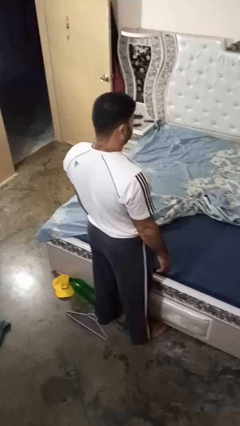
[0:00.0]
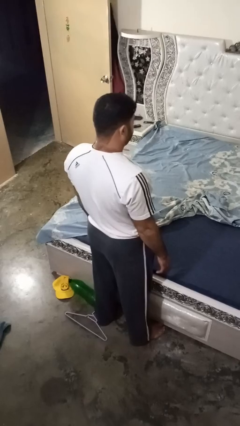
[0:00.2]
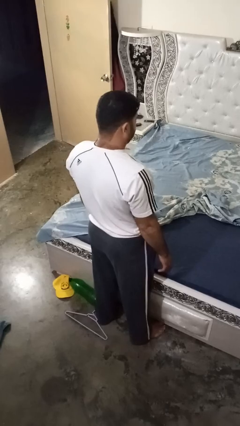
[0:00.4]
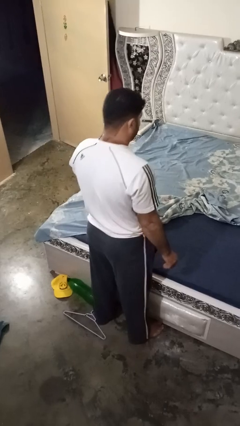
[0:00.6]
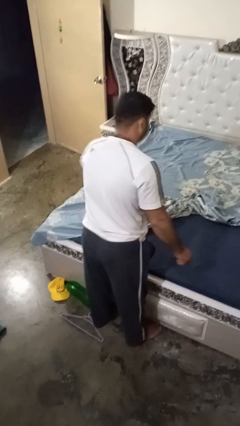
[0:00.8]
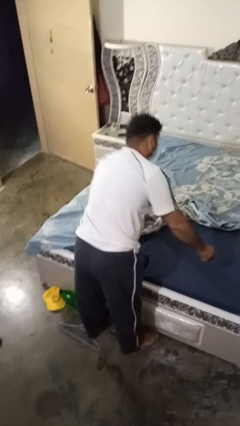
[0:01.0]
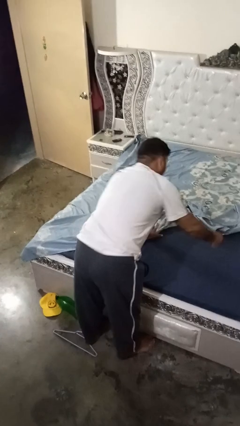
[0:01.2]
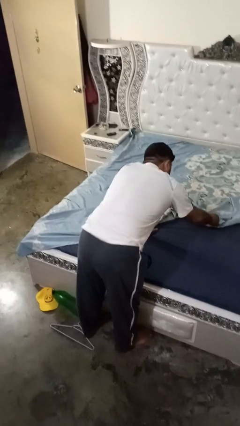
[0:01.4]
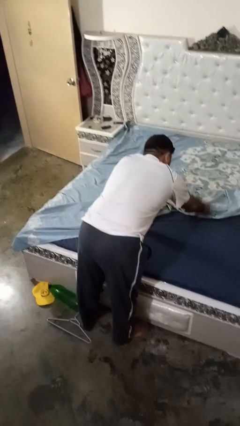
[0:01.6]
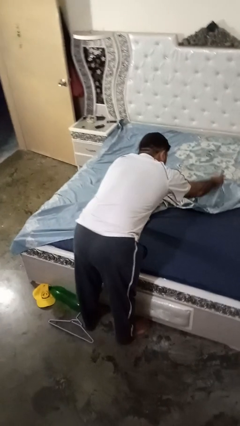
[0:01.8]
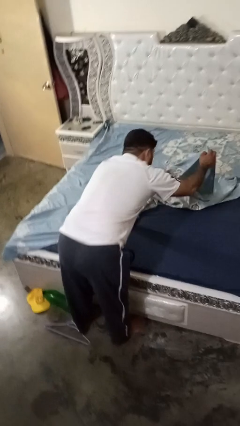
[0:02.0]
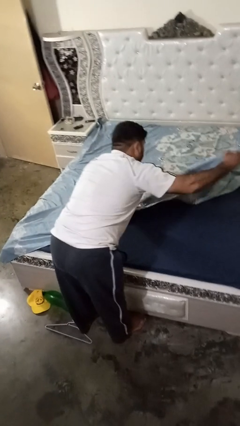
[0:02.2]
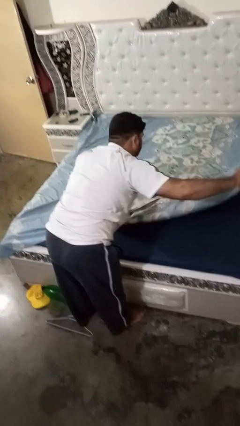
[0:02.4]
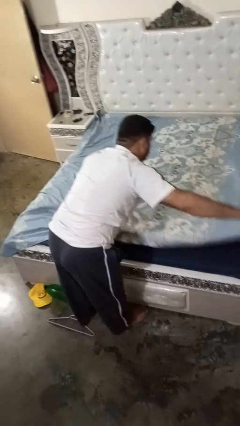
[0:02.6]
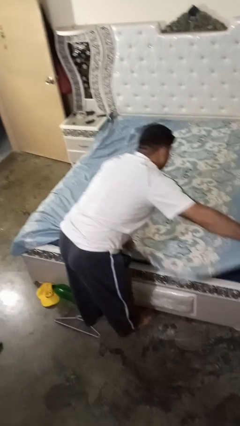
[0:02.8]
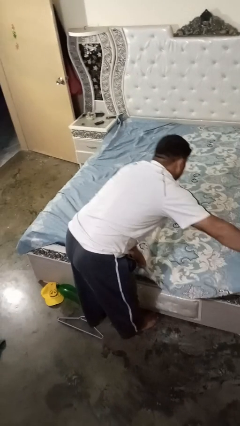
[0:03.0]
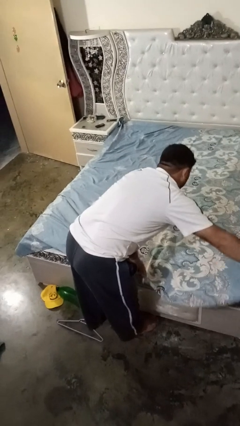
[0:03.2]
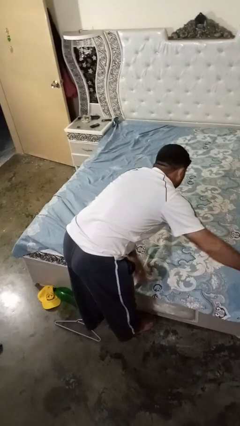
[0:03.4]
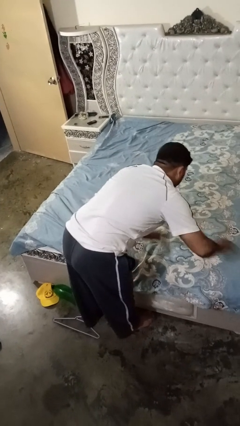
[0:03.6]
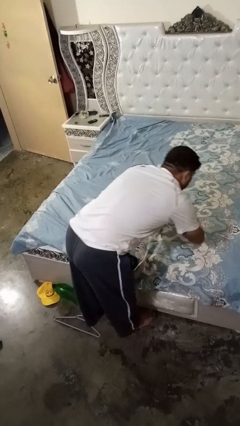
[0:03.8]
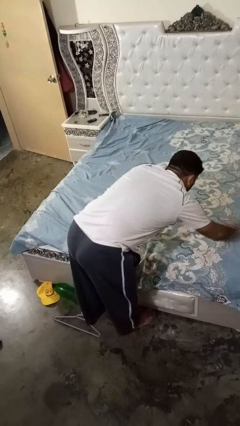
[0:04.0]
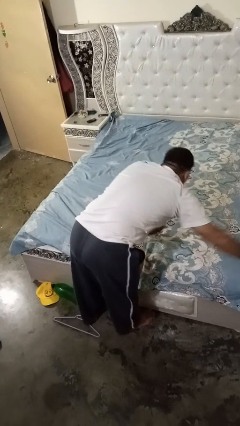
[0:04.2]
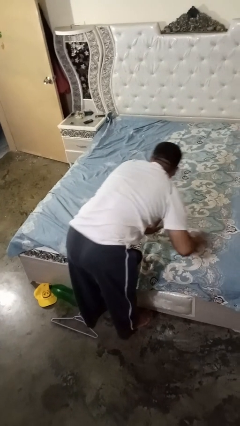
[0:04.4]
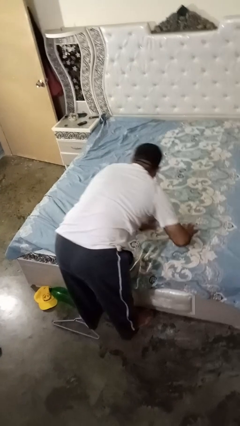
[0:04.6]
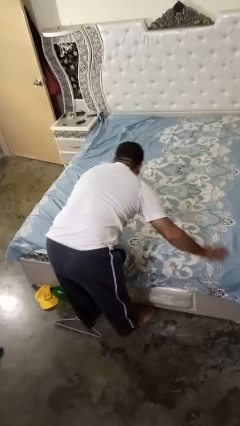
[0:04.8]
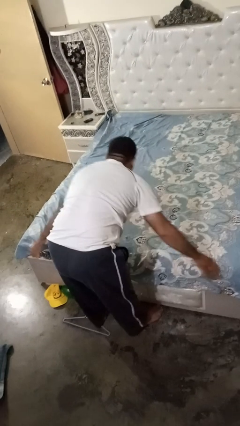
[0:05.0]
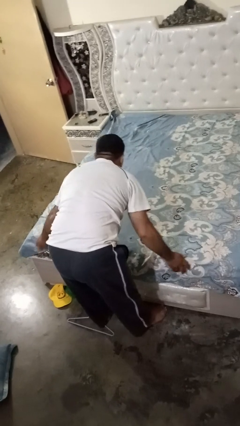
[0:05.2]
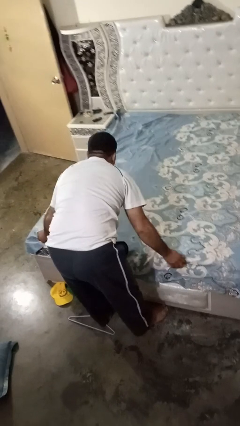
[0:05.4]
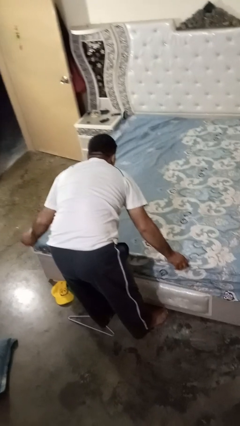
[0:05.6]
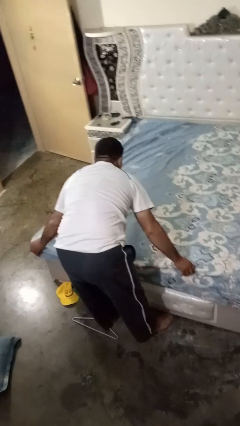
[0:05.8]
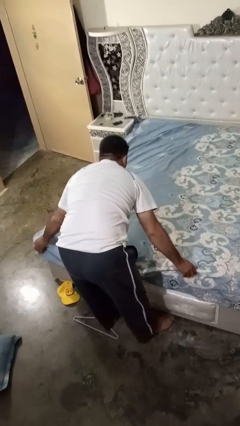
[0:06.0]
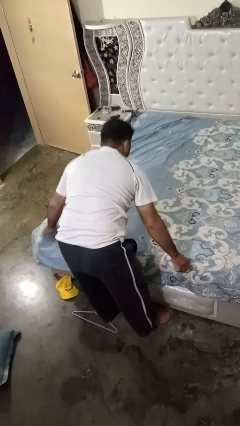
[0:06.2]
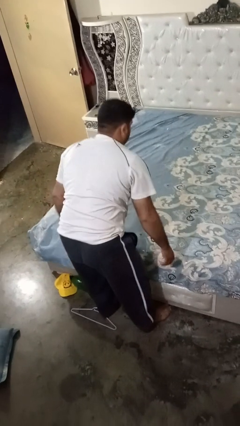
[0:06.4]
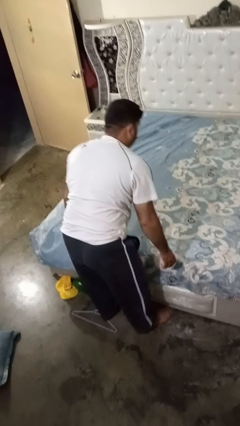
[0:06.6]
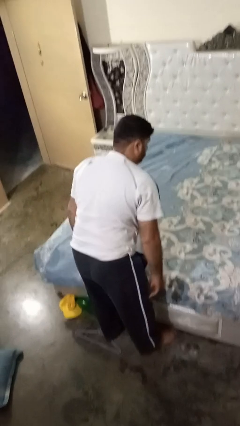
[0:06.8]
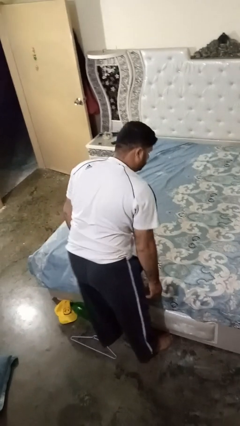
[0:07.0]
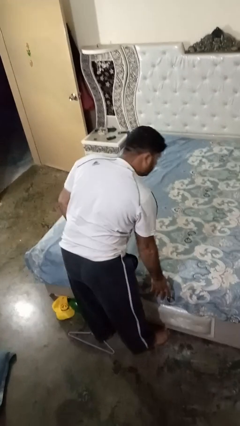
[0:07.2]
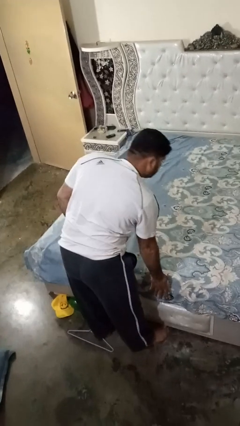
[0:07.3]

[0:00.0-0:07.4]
person makes bed

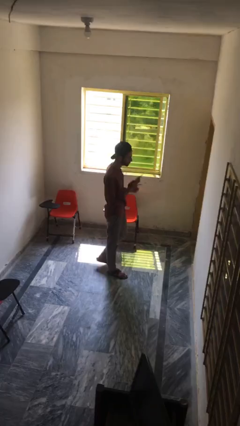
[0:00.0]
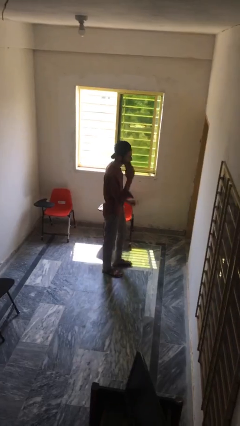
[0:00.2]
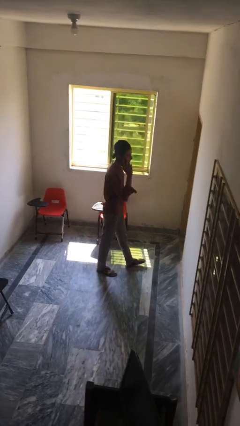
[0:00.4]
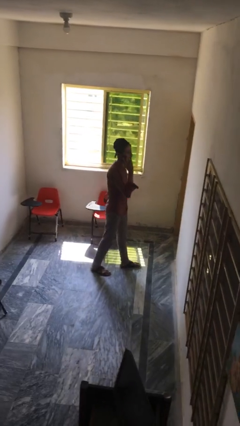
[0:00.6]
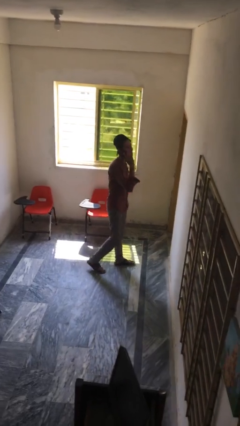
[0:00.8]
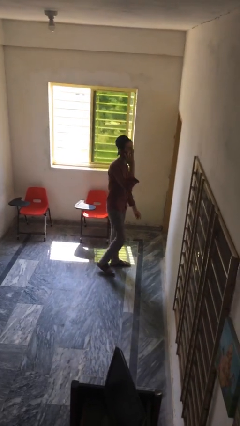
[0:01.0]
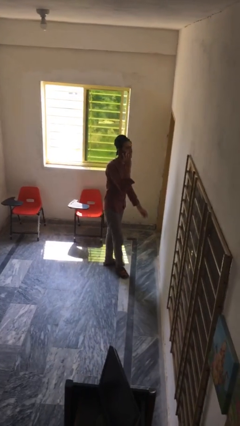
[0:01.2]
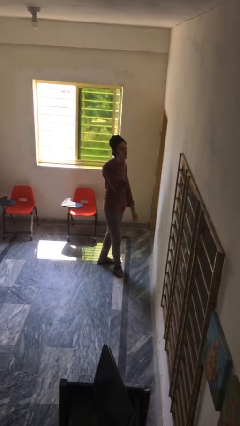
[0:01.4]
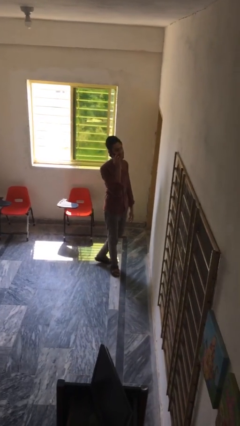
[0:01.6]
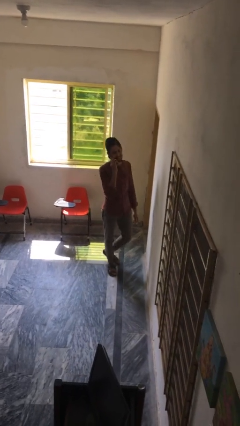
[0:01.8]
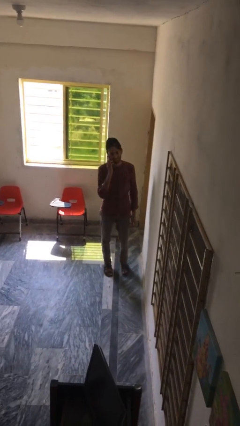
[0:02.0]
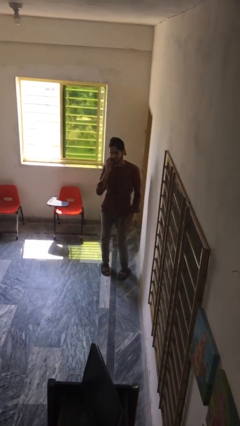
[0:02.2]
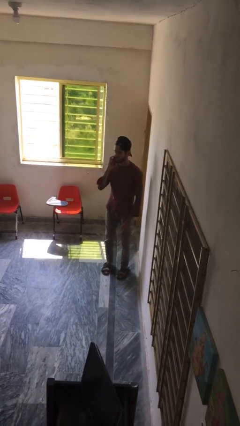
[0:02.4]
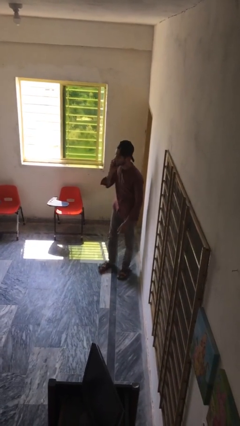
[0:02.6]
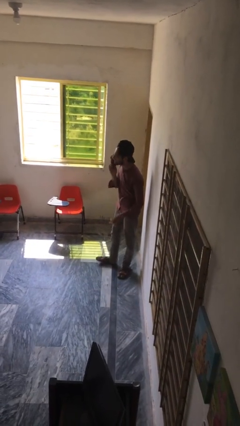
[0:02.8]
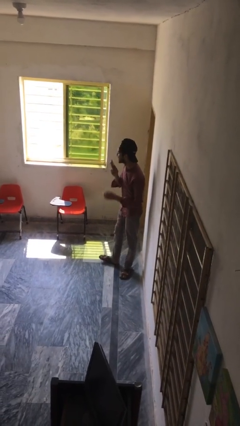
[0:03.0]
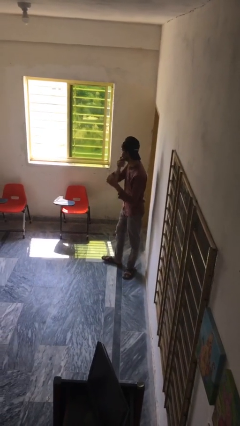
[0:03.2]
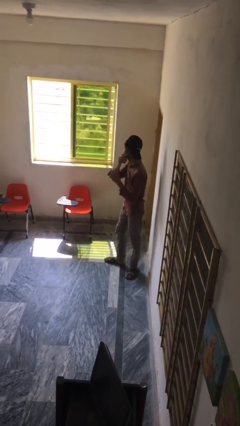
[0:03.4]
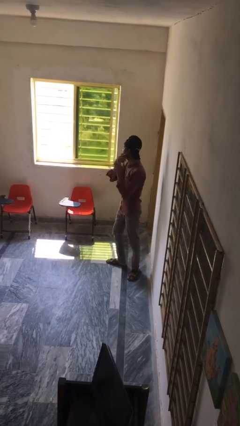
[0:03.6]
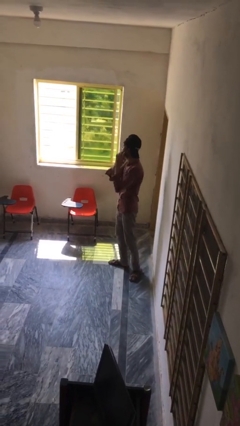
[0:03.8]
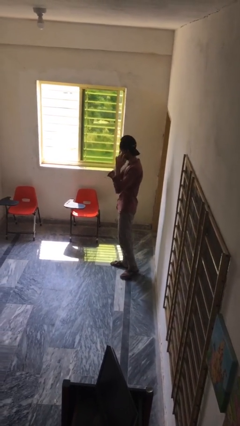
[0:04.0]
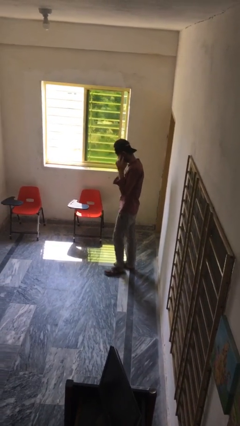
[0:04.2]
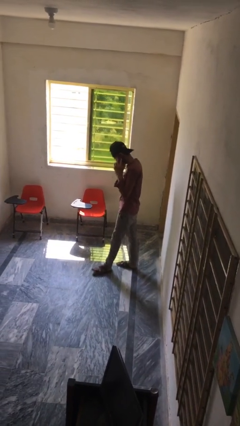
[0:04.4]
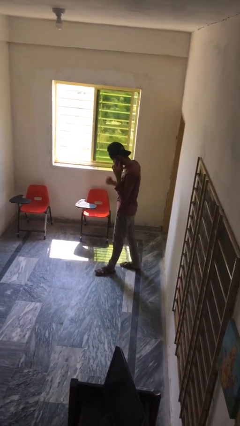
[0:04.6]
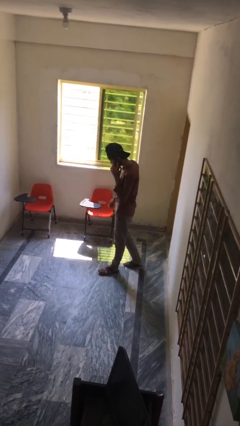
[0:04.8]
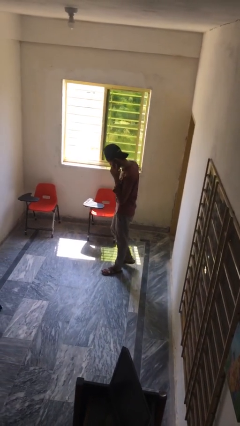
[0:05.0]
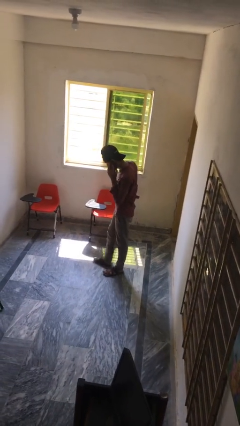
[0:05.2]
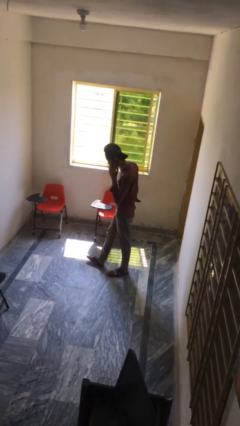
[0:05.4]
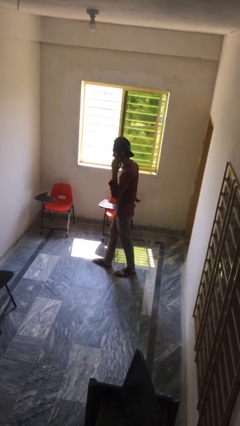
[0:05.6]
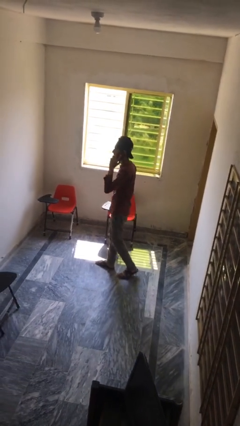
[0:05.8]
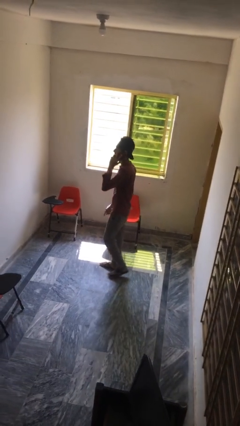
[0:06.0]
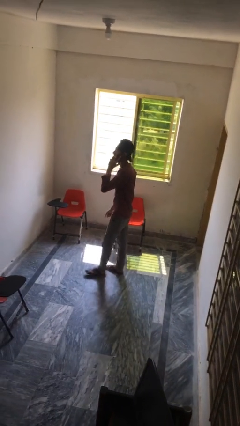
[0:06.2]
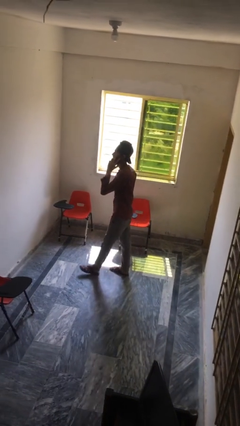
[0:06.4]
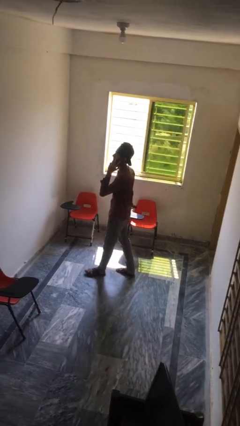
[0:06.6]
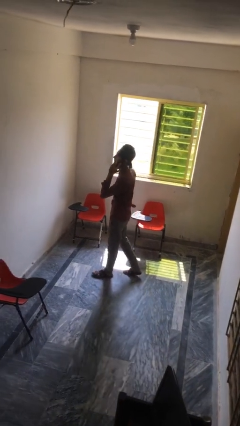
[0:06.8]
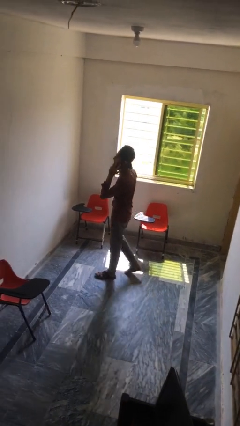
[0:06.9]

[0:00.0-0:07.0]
person talks on phone

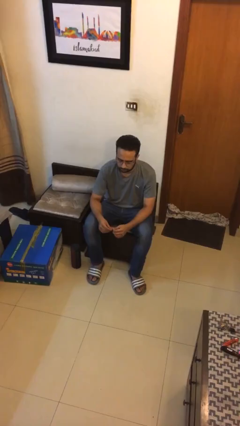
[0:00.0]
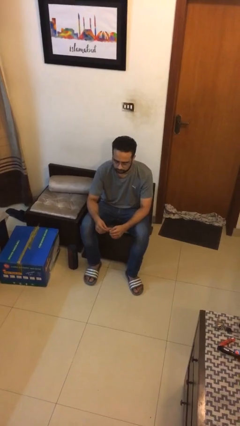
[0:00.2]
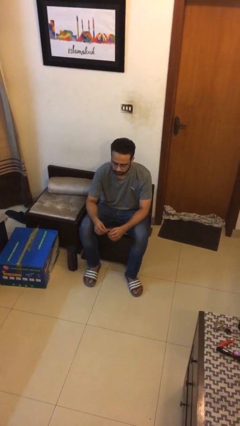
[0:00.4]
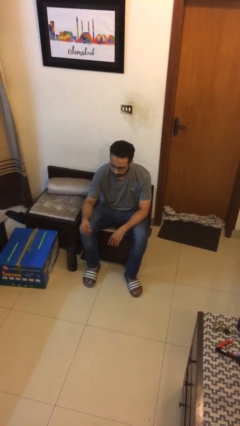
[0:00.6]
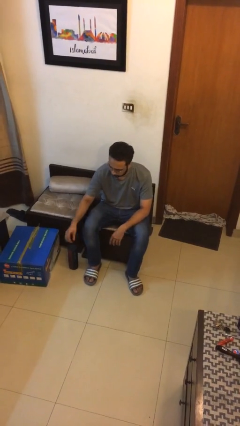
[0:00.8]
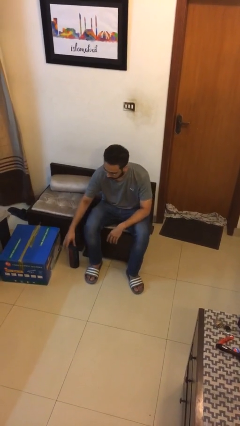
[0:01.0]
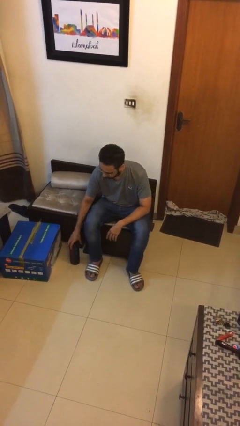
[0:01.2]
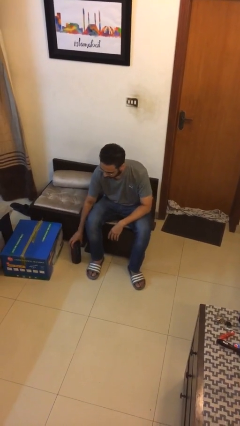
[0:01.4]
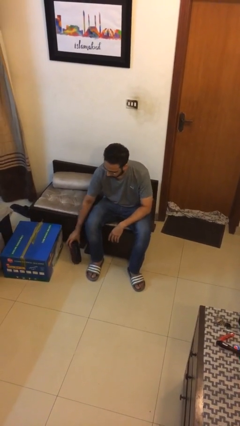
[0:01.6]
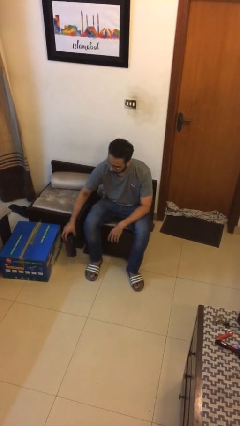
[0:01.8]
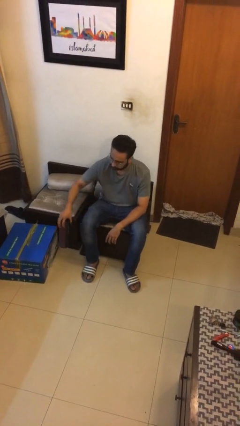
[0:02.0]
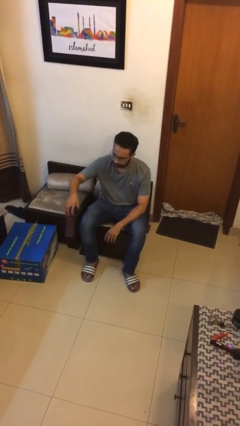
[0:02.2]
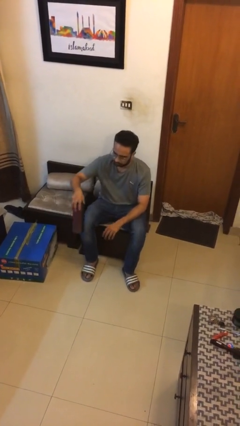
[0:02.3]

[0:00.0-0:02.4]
person picks up object from floor

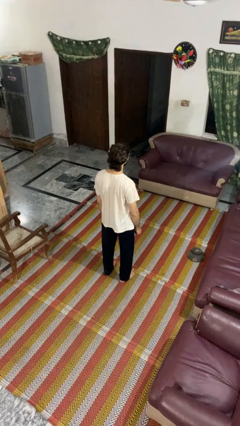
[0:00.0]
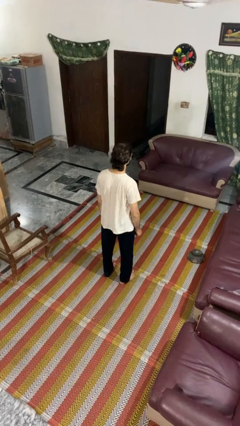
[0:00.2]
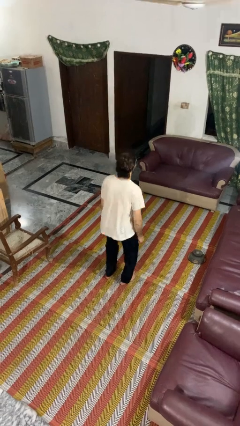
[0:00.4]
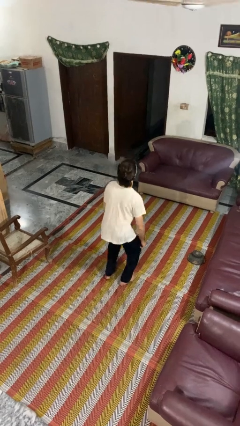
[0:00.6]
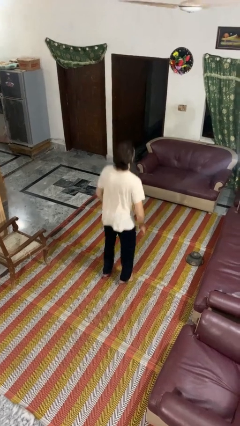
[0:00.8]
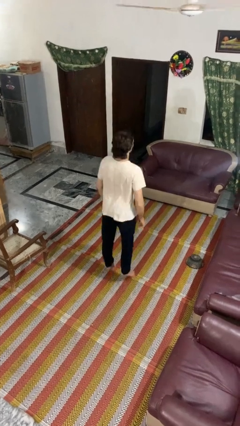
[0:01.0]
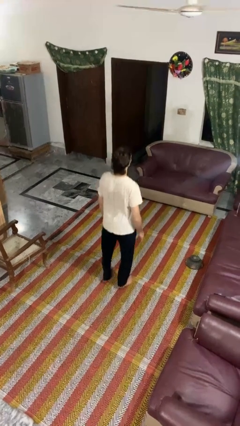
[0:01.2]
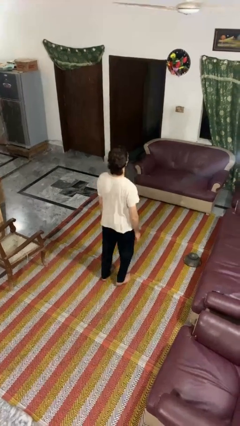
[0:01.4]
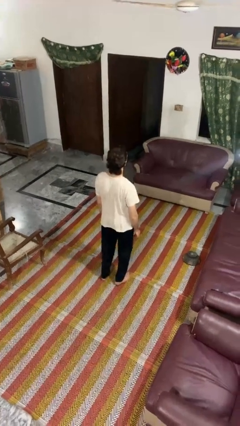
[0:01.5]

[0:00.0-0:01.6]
person jumps
